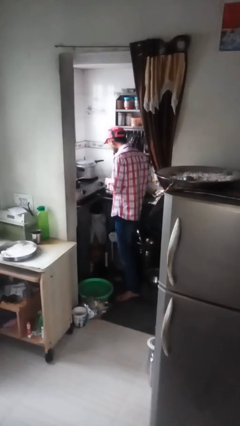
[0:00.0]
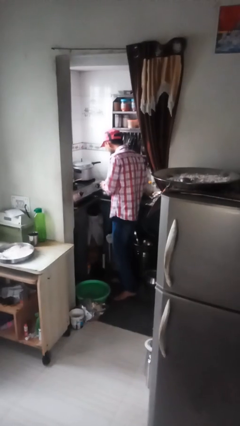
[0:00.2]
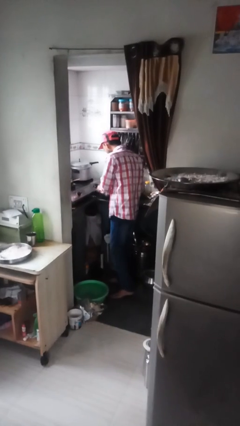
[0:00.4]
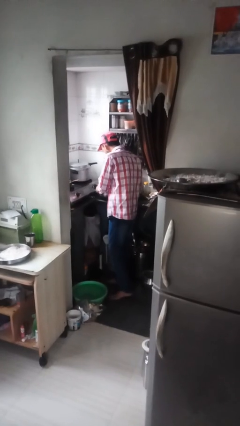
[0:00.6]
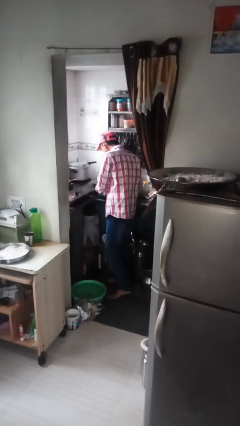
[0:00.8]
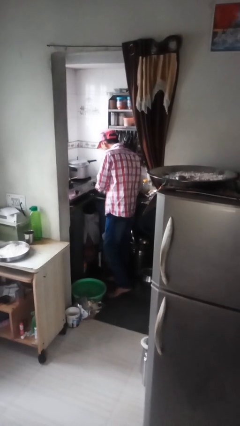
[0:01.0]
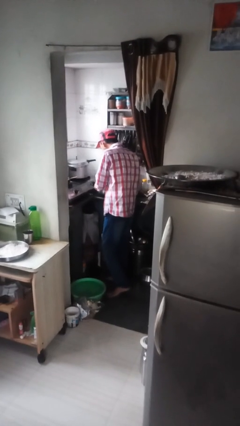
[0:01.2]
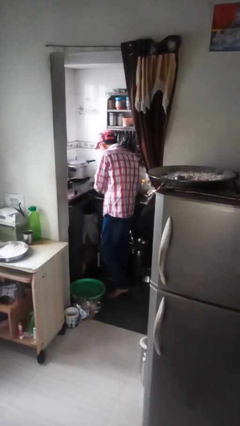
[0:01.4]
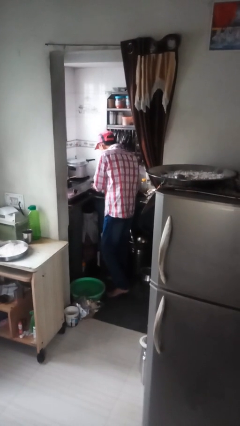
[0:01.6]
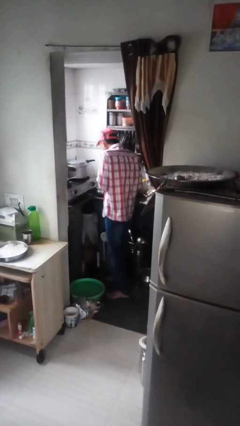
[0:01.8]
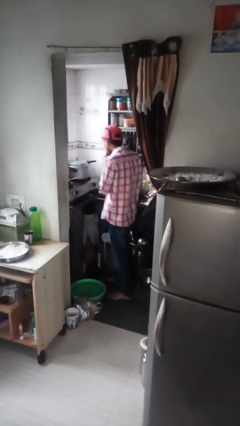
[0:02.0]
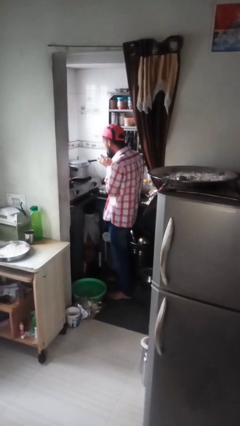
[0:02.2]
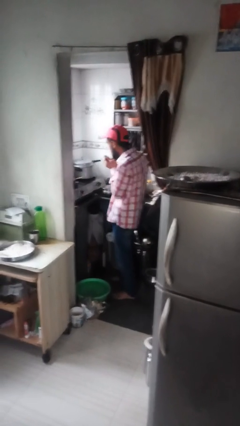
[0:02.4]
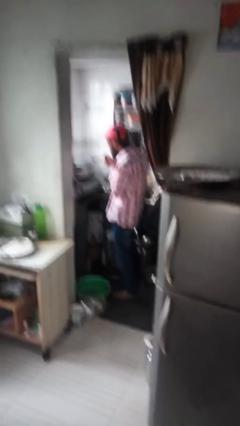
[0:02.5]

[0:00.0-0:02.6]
person burns hand

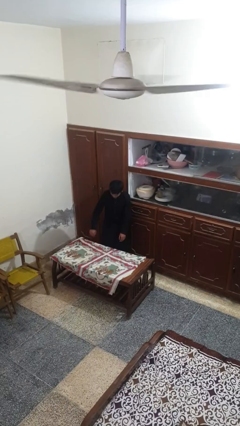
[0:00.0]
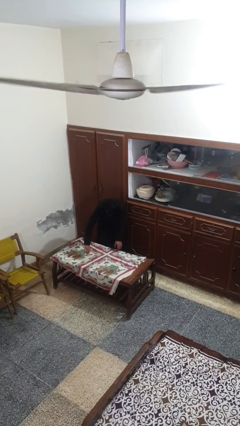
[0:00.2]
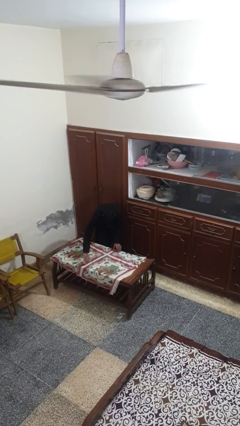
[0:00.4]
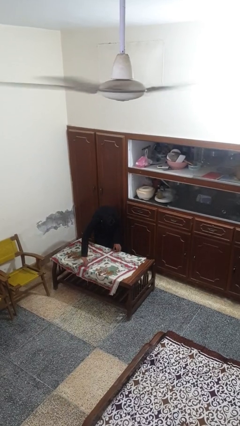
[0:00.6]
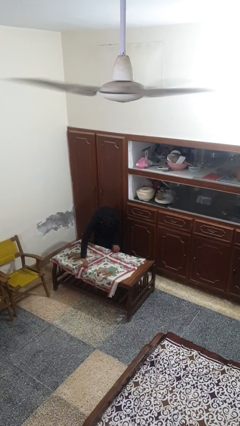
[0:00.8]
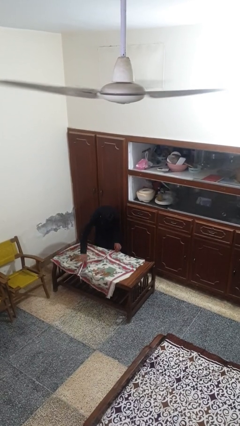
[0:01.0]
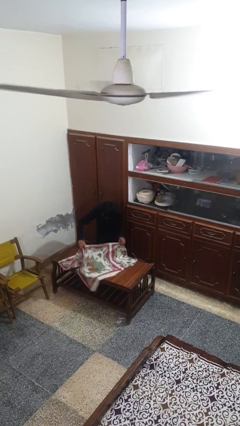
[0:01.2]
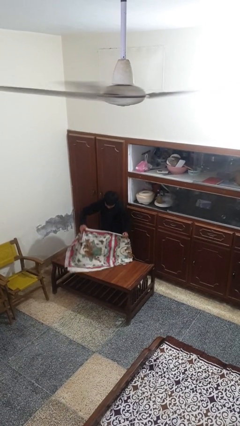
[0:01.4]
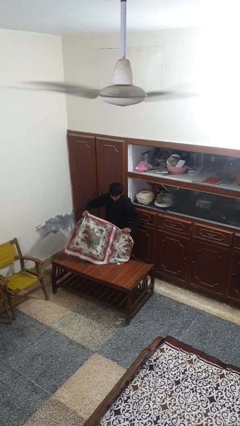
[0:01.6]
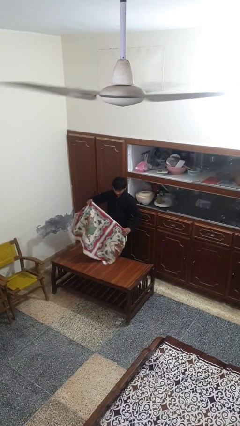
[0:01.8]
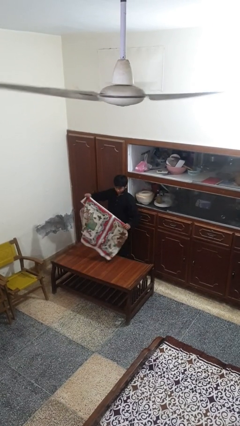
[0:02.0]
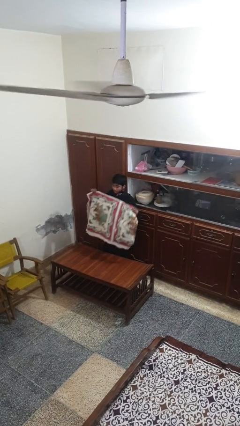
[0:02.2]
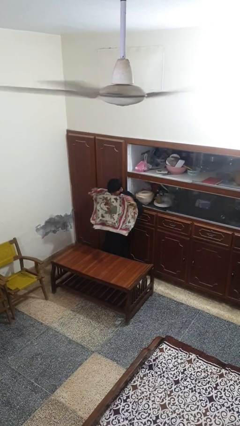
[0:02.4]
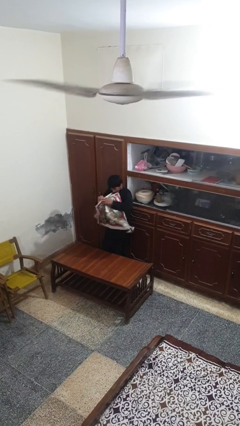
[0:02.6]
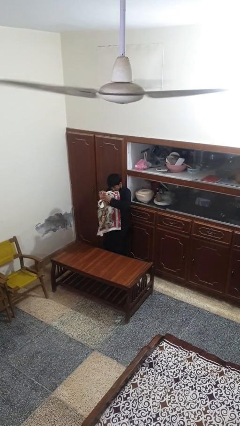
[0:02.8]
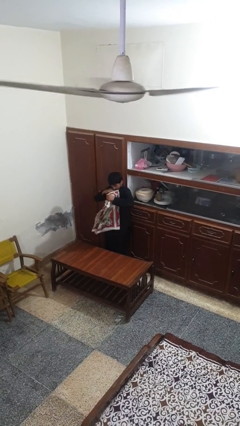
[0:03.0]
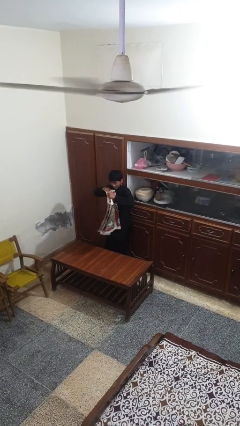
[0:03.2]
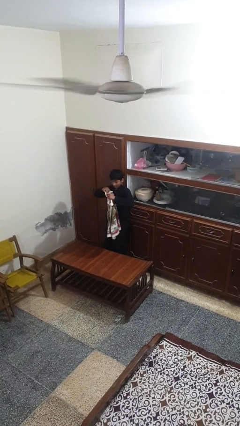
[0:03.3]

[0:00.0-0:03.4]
person folds tablecloth

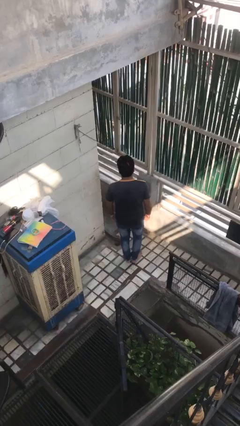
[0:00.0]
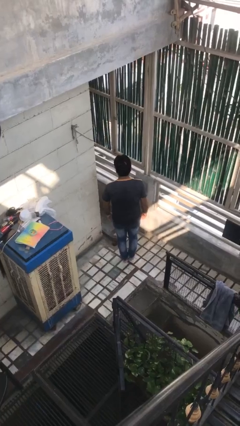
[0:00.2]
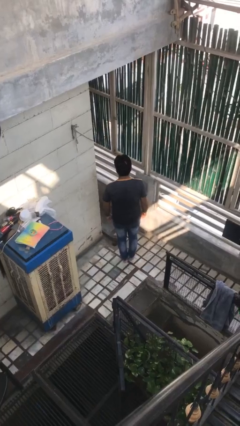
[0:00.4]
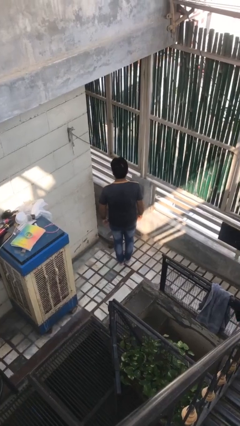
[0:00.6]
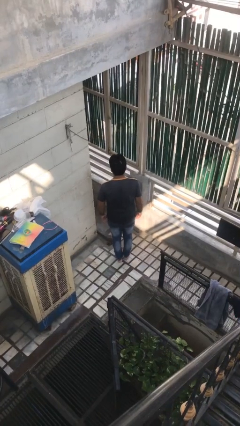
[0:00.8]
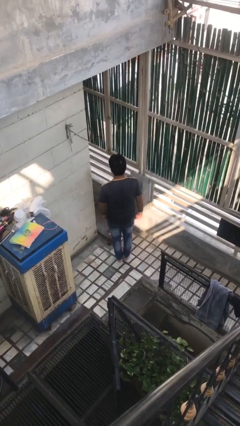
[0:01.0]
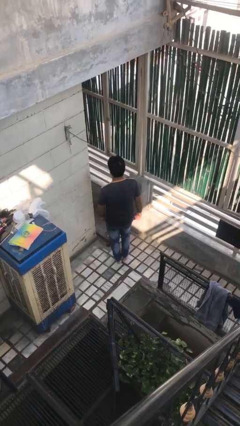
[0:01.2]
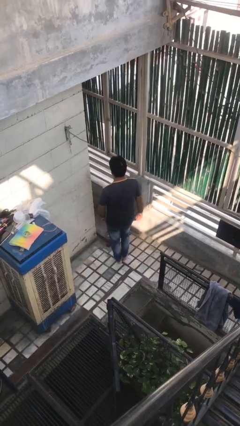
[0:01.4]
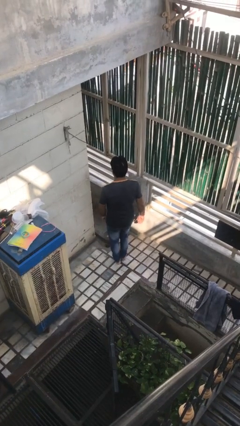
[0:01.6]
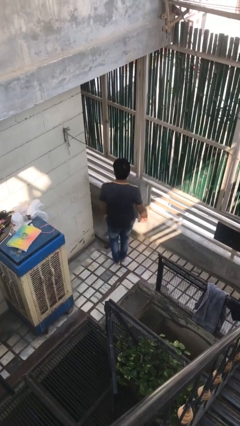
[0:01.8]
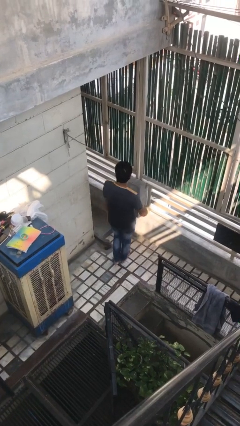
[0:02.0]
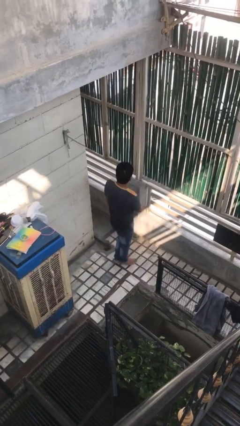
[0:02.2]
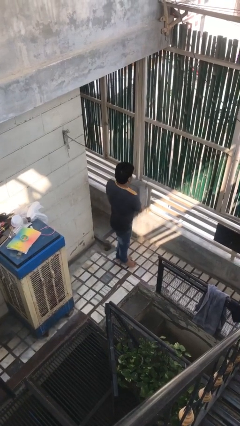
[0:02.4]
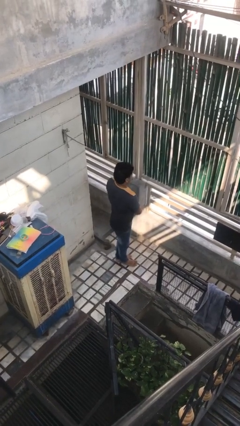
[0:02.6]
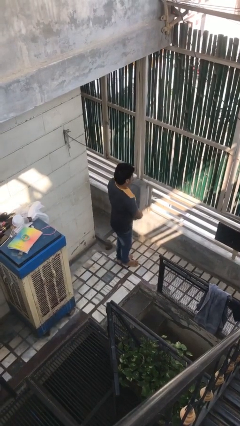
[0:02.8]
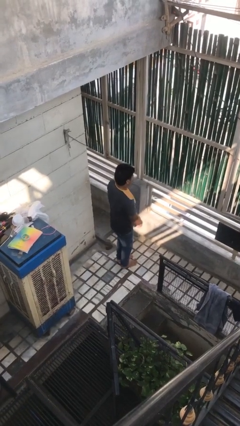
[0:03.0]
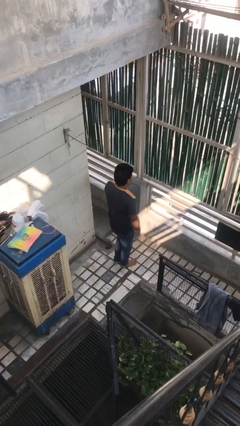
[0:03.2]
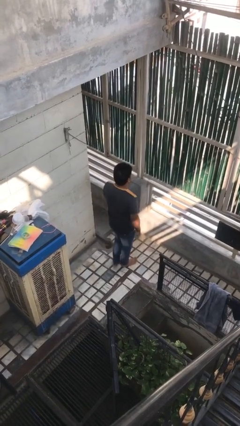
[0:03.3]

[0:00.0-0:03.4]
person twirls

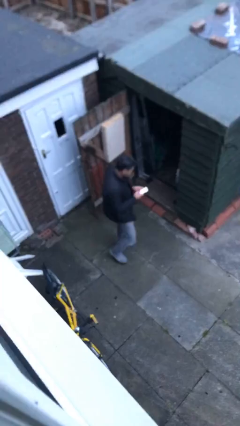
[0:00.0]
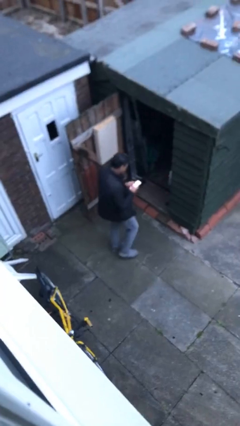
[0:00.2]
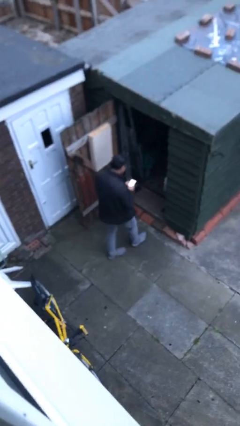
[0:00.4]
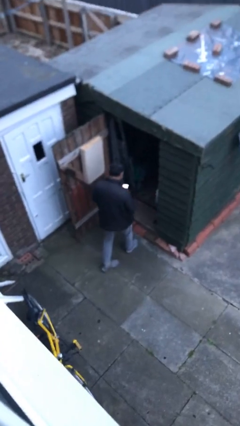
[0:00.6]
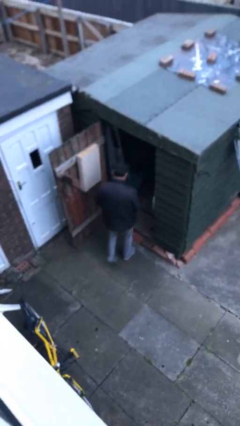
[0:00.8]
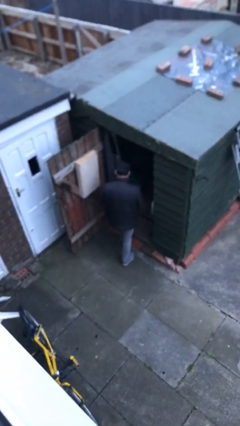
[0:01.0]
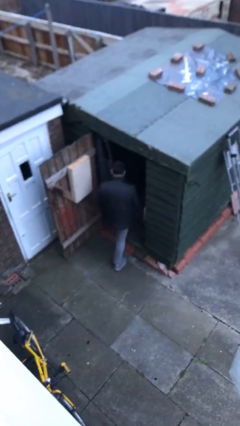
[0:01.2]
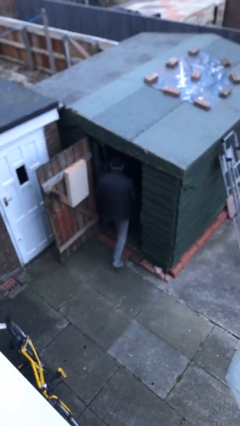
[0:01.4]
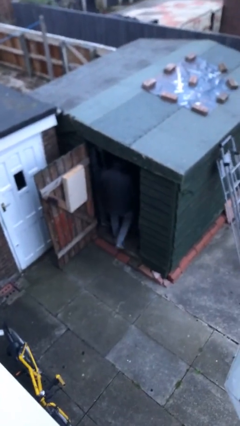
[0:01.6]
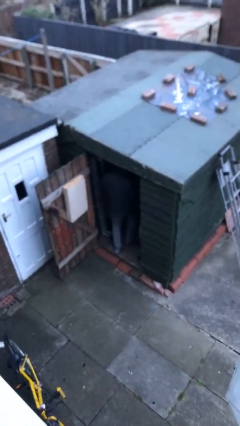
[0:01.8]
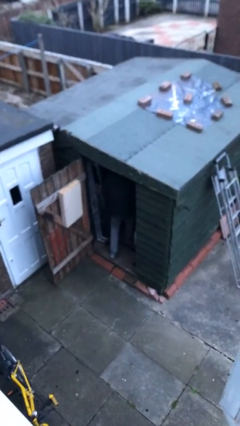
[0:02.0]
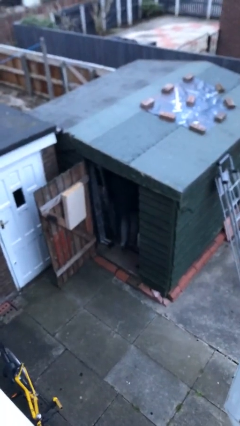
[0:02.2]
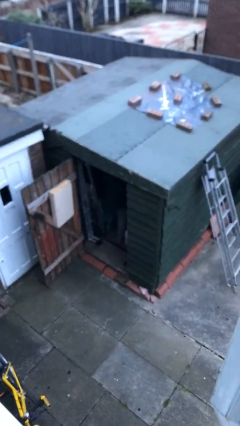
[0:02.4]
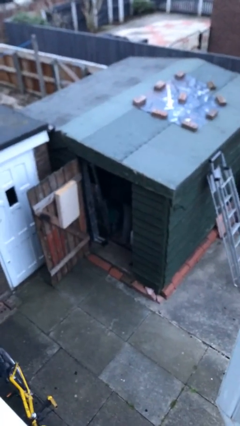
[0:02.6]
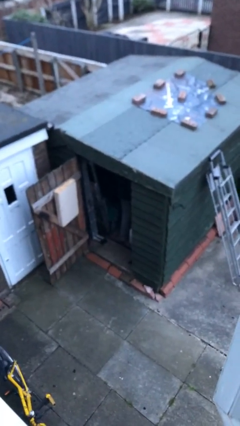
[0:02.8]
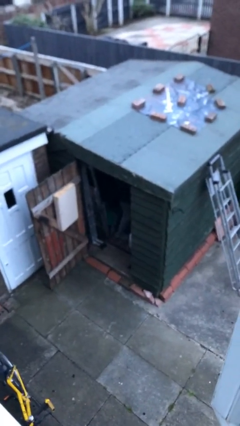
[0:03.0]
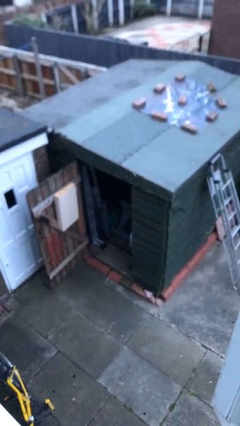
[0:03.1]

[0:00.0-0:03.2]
person exits scene through structure

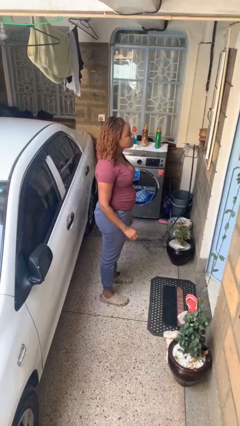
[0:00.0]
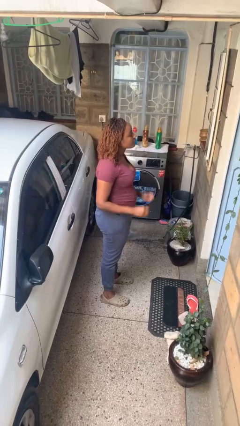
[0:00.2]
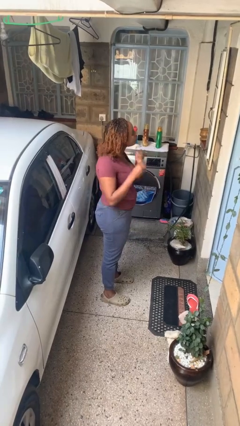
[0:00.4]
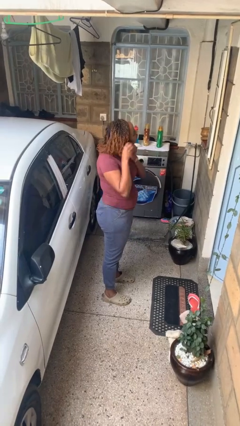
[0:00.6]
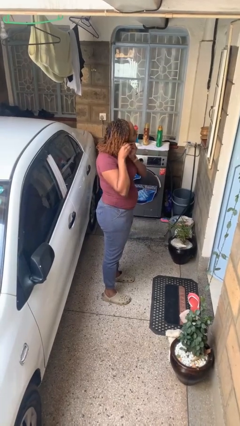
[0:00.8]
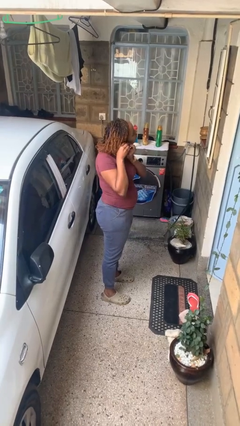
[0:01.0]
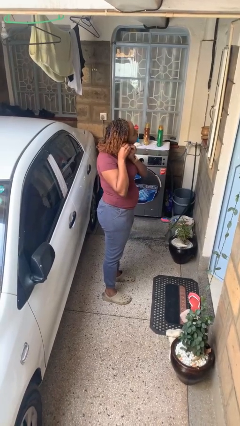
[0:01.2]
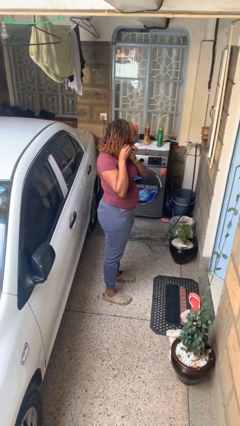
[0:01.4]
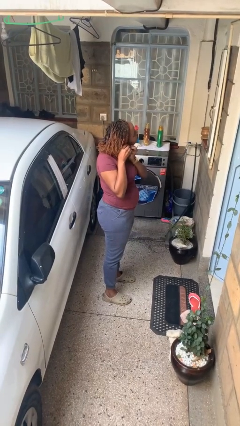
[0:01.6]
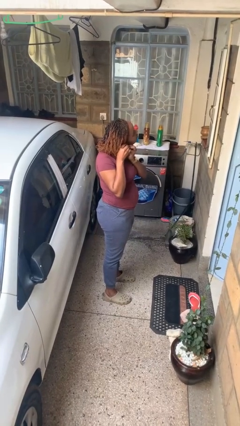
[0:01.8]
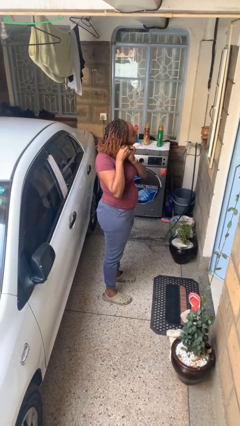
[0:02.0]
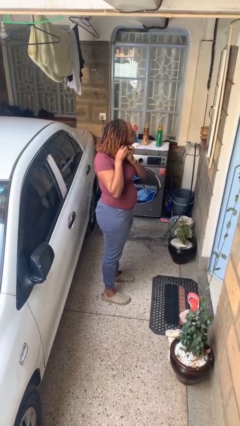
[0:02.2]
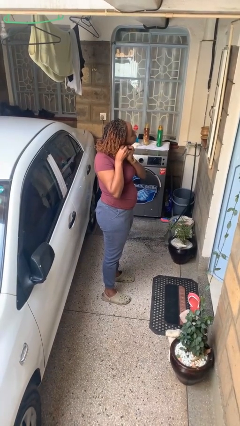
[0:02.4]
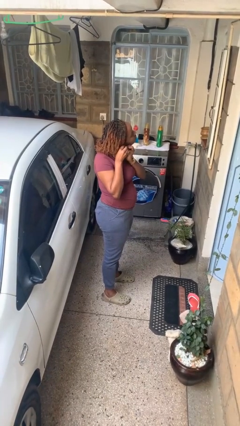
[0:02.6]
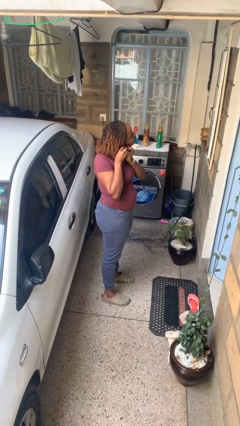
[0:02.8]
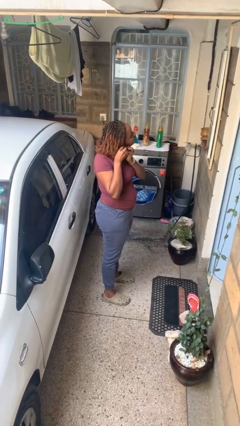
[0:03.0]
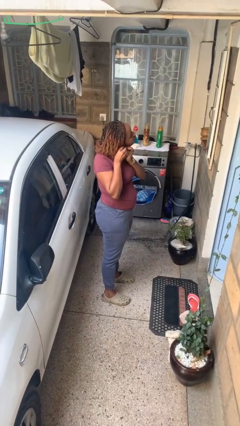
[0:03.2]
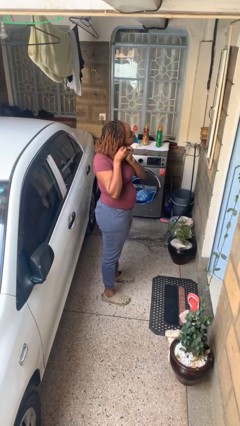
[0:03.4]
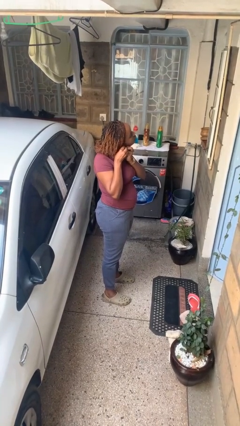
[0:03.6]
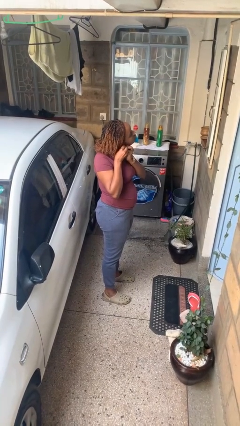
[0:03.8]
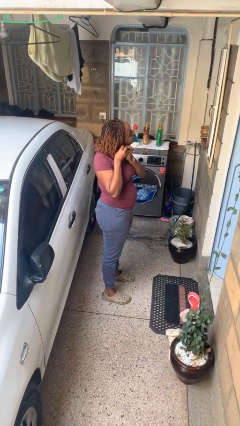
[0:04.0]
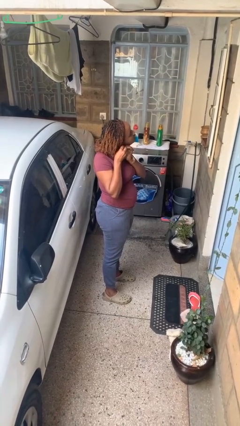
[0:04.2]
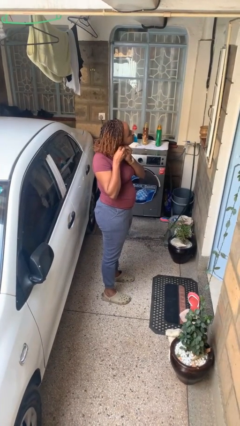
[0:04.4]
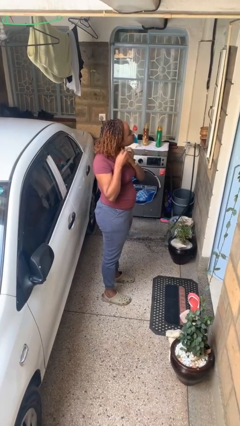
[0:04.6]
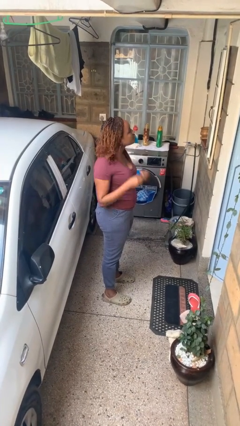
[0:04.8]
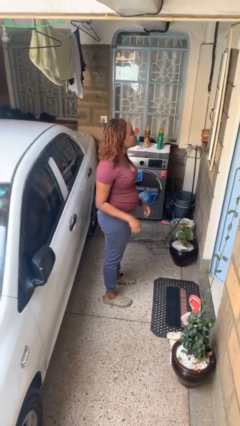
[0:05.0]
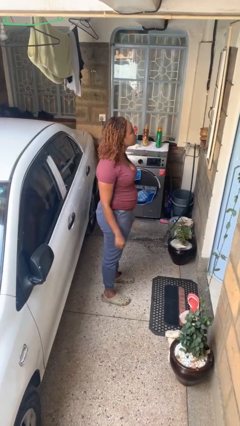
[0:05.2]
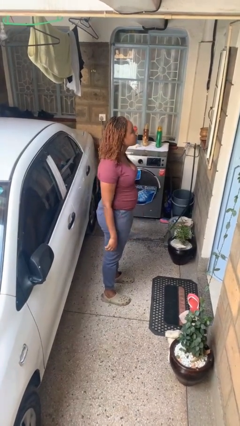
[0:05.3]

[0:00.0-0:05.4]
person puts on earrings
